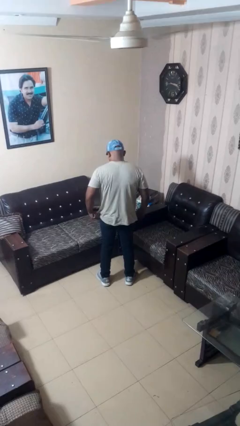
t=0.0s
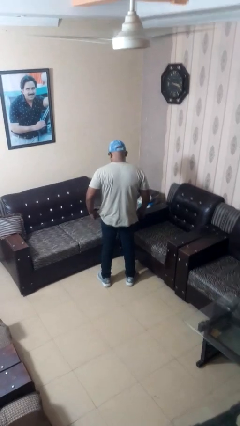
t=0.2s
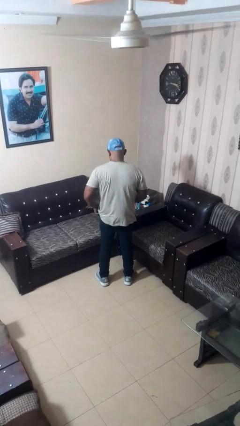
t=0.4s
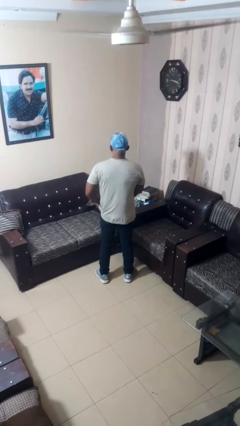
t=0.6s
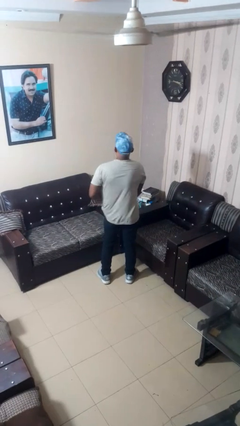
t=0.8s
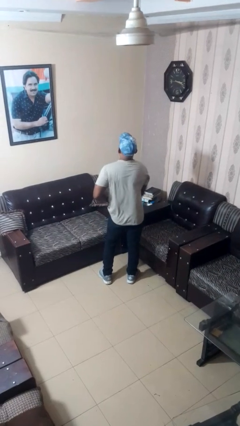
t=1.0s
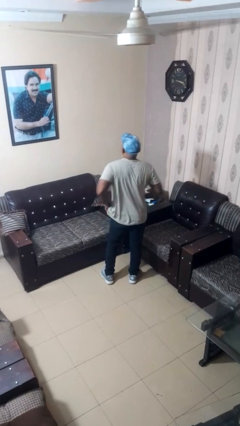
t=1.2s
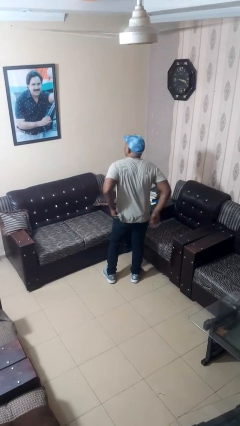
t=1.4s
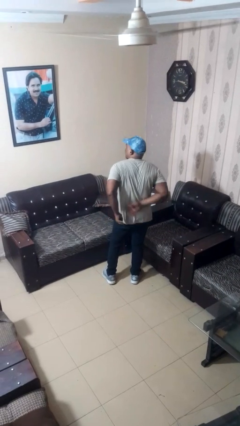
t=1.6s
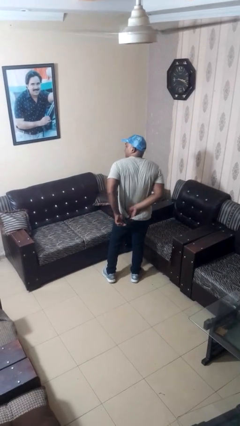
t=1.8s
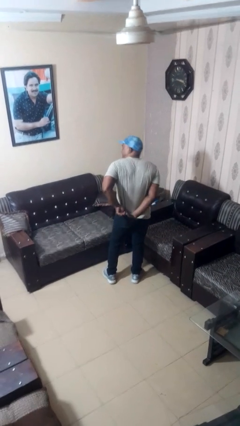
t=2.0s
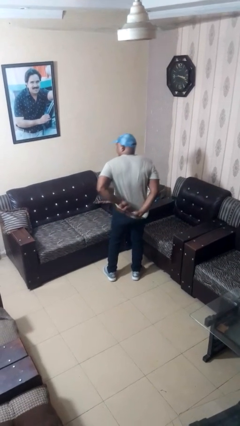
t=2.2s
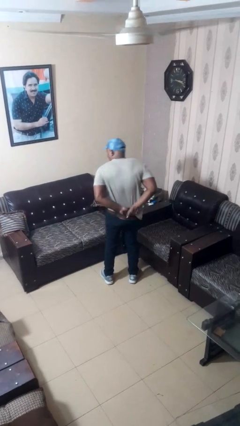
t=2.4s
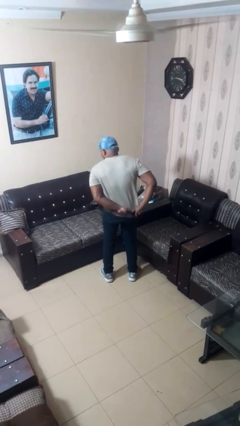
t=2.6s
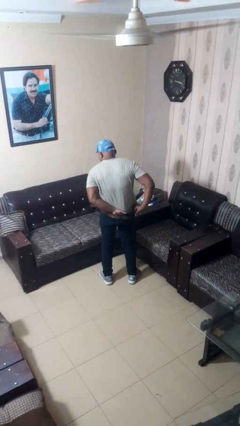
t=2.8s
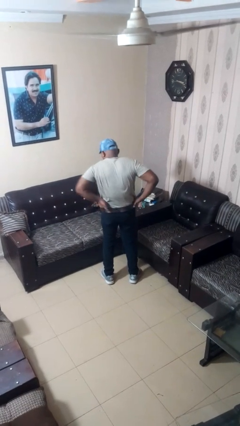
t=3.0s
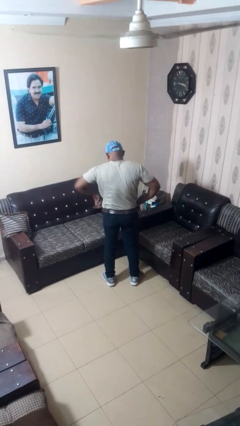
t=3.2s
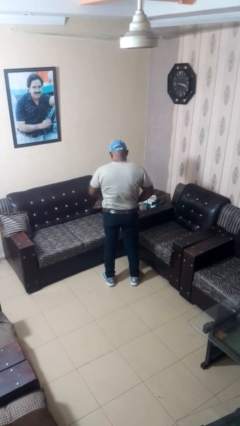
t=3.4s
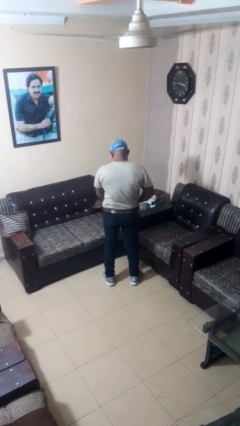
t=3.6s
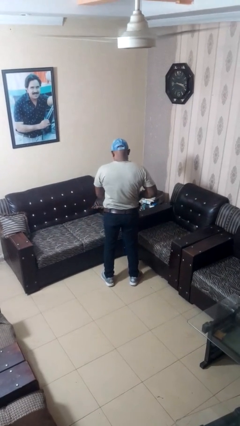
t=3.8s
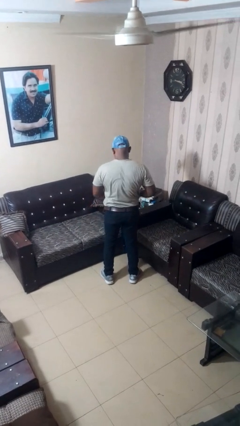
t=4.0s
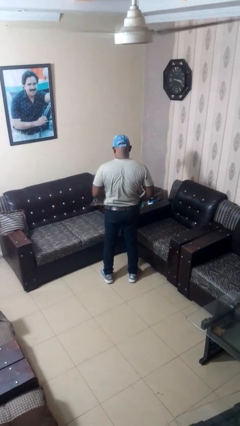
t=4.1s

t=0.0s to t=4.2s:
person tucks in shirt

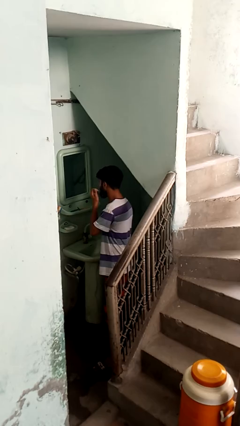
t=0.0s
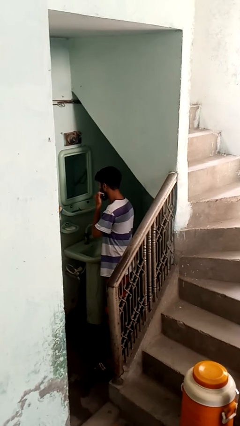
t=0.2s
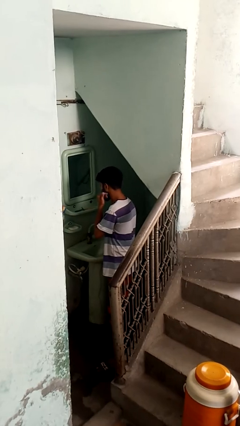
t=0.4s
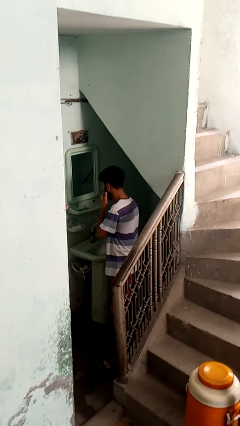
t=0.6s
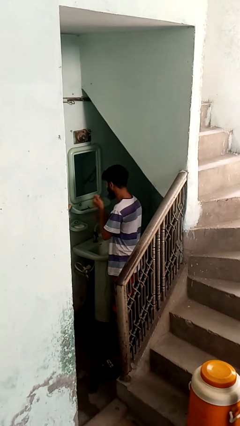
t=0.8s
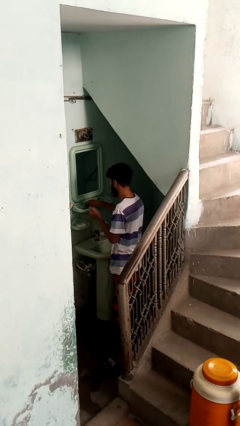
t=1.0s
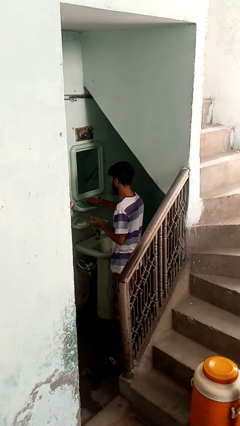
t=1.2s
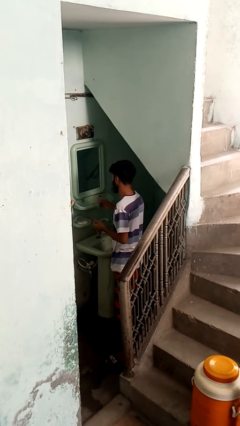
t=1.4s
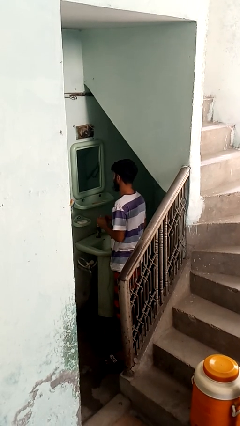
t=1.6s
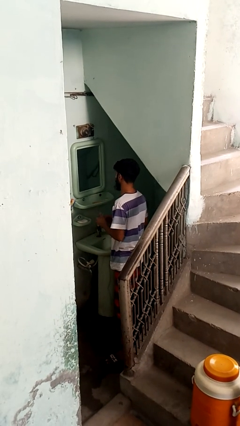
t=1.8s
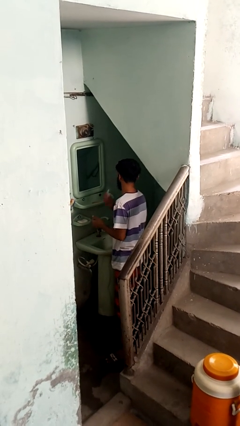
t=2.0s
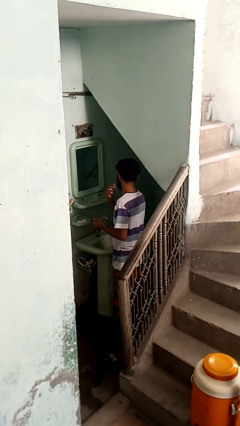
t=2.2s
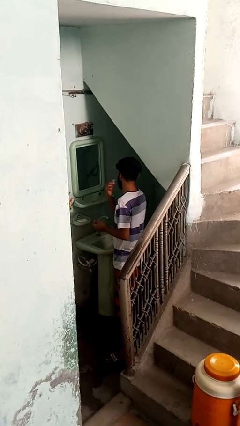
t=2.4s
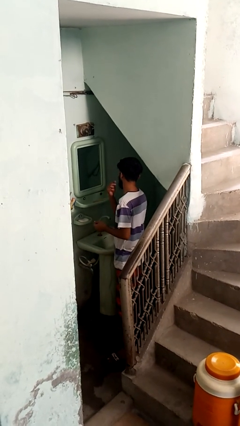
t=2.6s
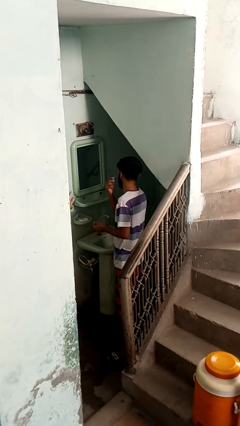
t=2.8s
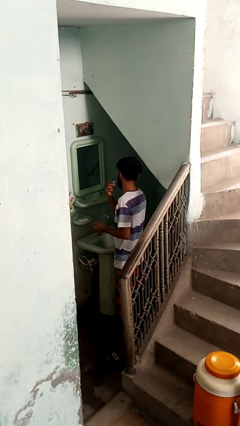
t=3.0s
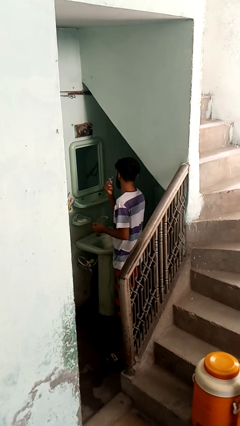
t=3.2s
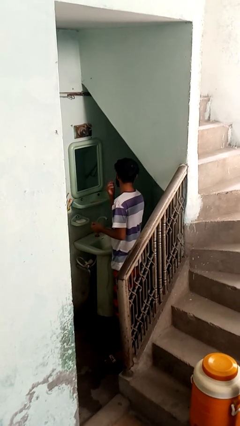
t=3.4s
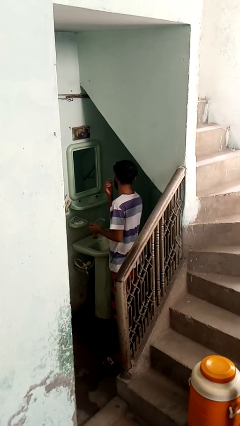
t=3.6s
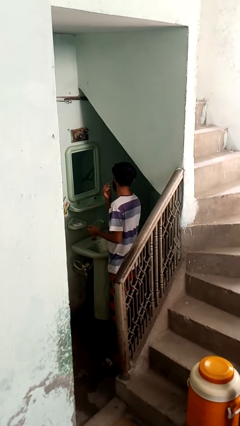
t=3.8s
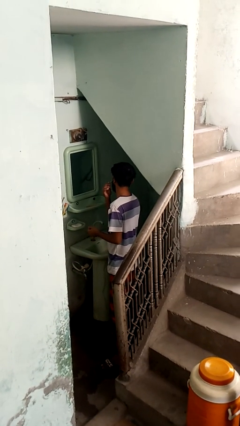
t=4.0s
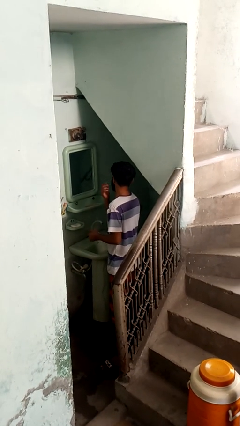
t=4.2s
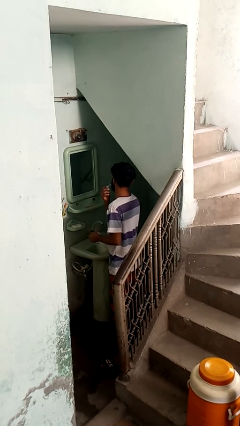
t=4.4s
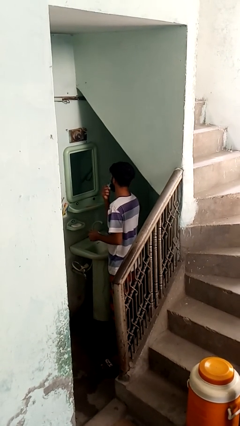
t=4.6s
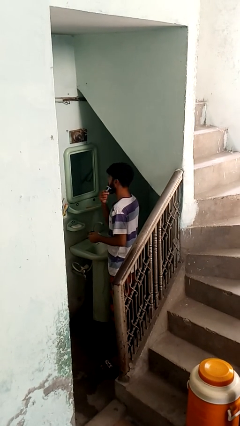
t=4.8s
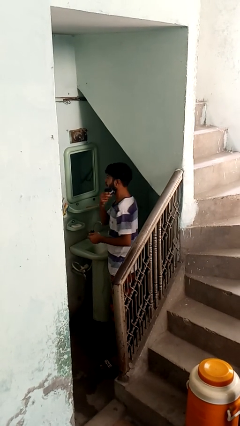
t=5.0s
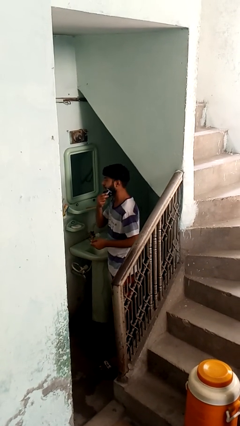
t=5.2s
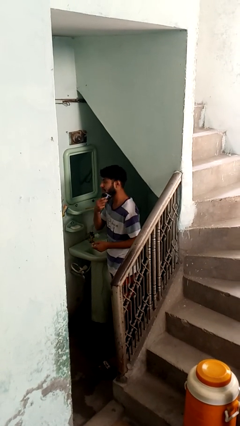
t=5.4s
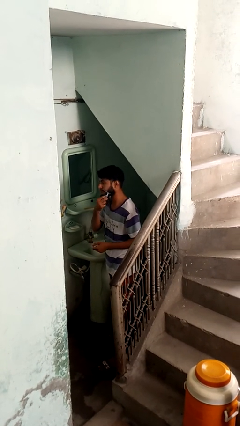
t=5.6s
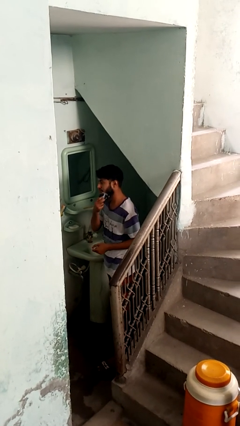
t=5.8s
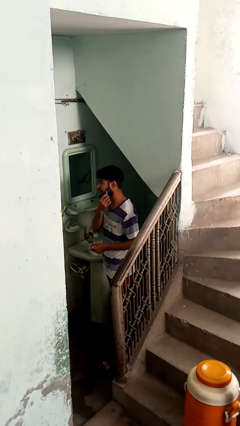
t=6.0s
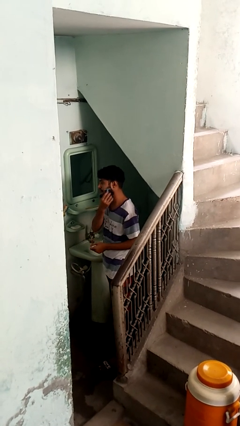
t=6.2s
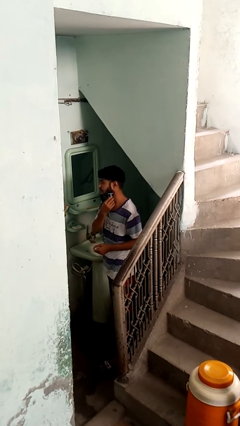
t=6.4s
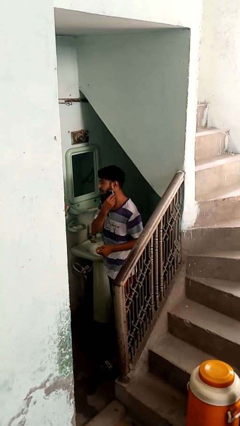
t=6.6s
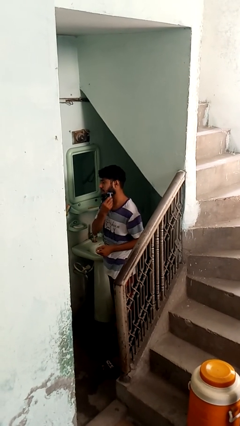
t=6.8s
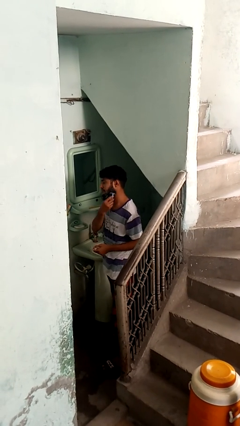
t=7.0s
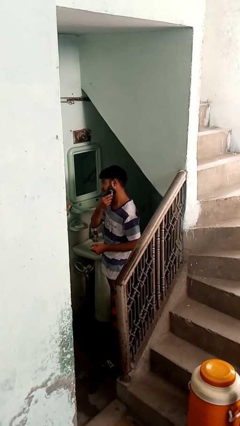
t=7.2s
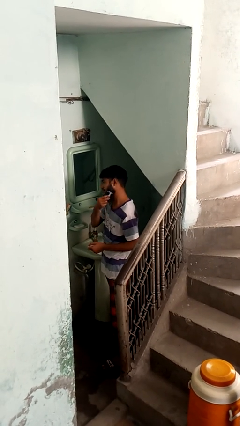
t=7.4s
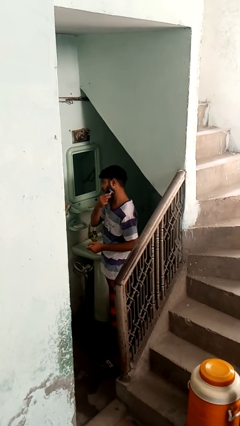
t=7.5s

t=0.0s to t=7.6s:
person shaves face

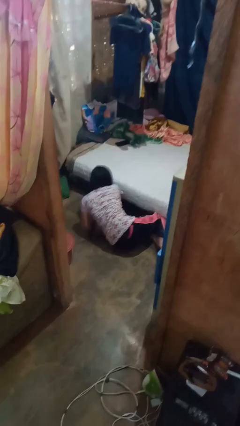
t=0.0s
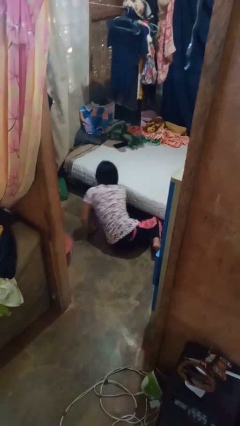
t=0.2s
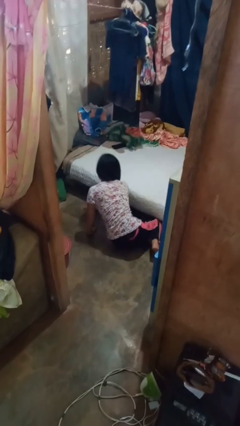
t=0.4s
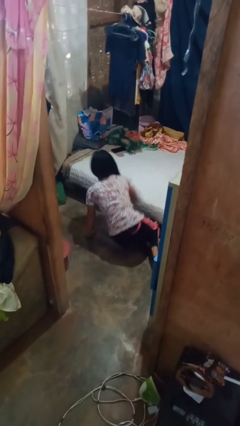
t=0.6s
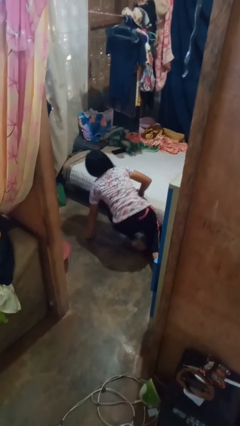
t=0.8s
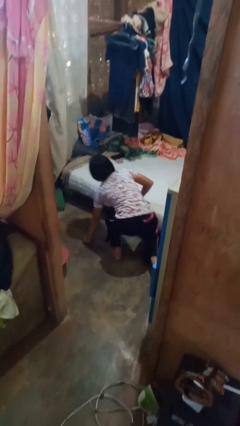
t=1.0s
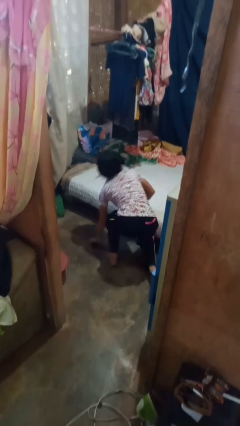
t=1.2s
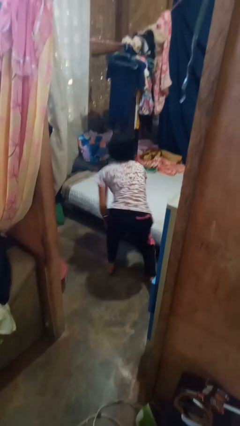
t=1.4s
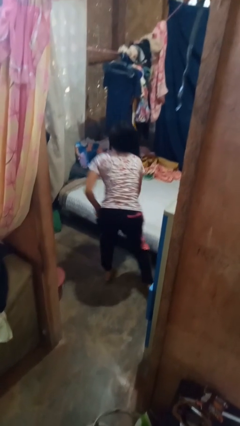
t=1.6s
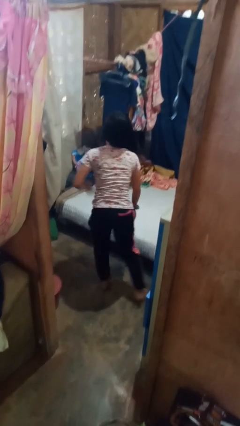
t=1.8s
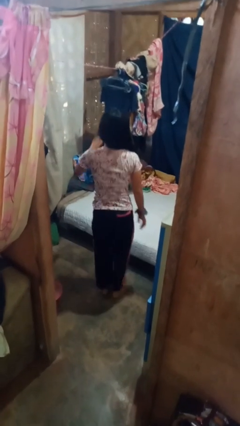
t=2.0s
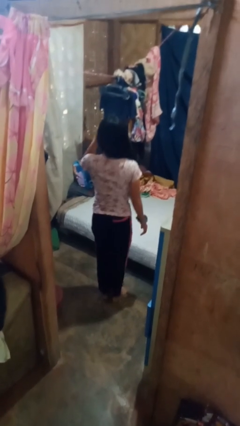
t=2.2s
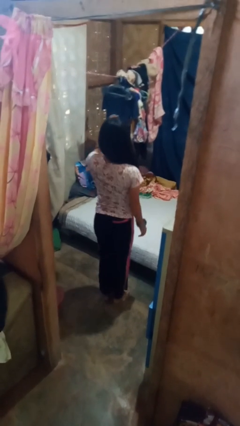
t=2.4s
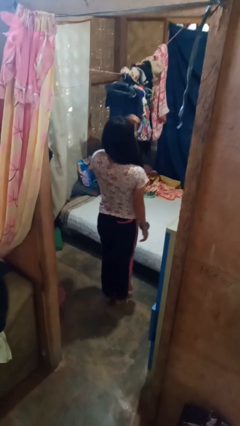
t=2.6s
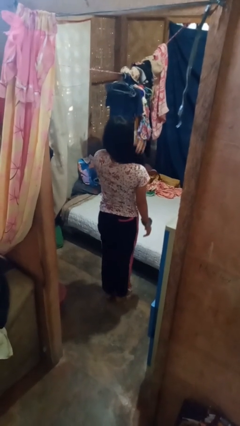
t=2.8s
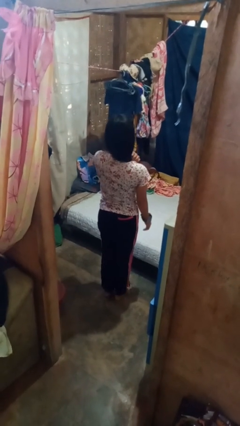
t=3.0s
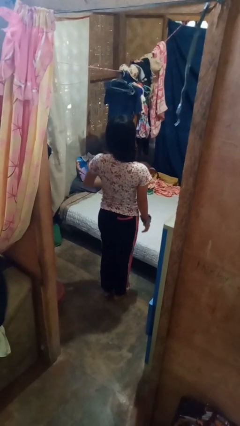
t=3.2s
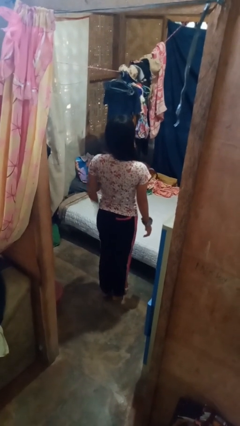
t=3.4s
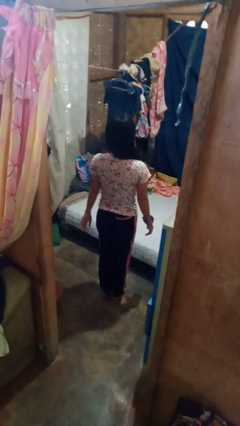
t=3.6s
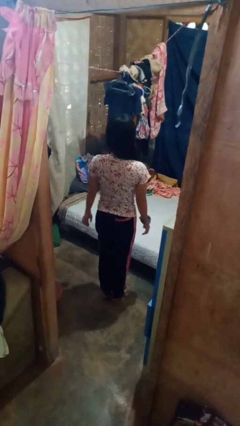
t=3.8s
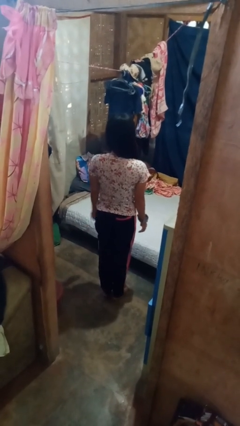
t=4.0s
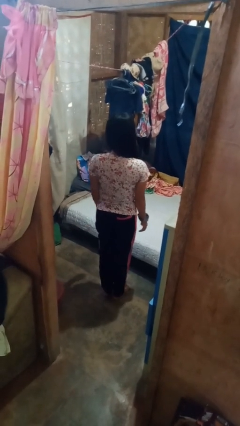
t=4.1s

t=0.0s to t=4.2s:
person stands up from floor

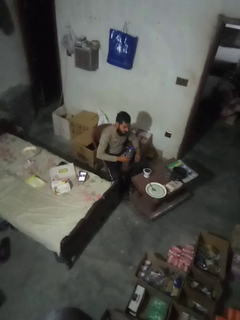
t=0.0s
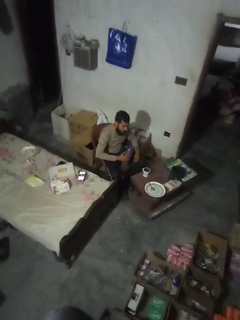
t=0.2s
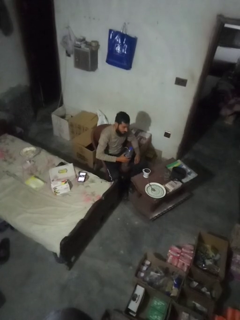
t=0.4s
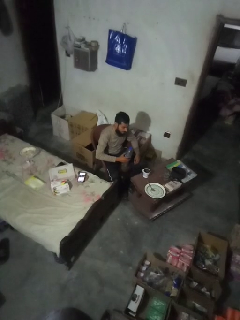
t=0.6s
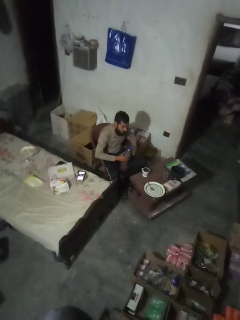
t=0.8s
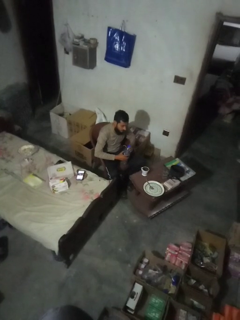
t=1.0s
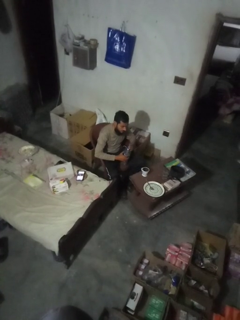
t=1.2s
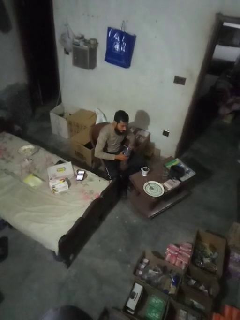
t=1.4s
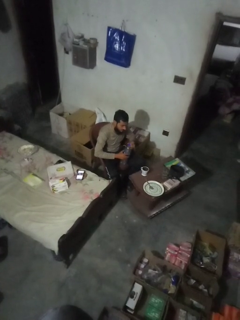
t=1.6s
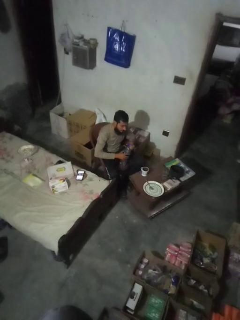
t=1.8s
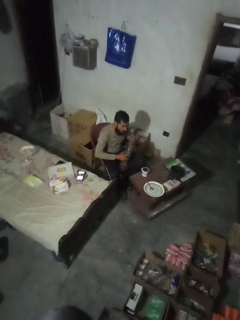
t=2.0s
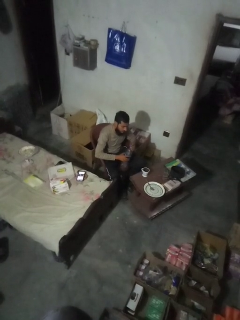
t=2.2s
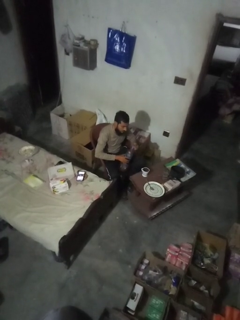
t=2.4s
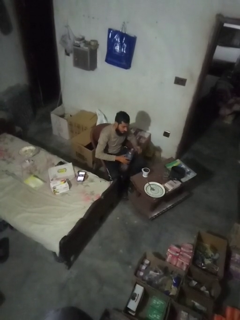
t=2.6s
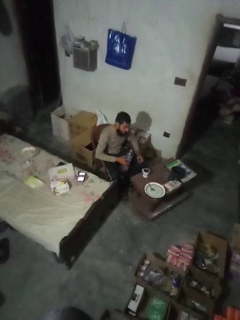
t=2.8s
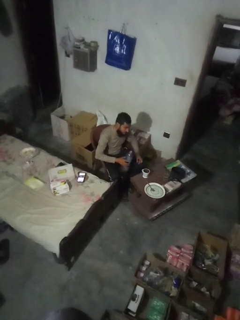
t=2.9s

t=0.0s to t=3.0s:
person unscrews lid from bottle
